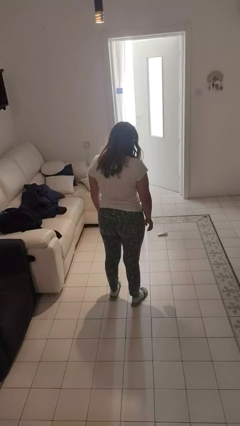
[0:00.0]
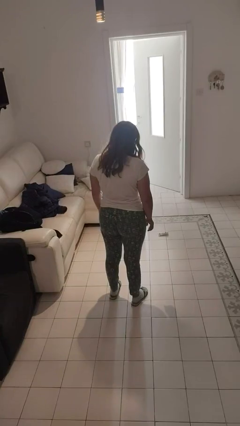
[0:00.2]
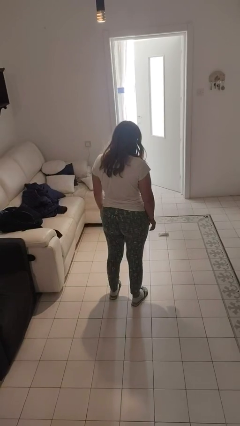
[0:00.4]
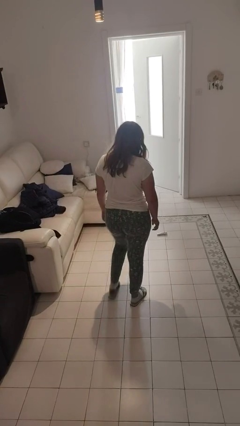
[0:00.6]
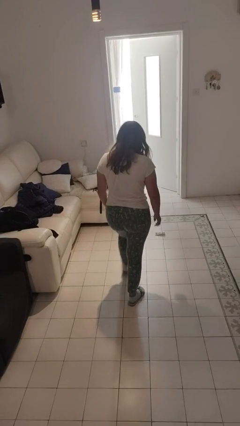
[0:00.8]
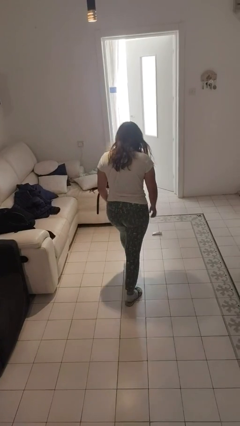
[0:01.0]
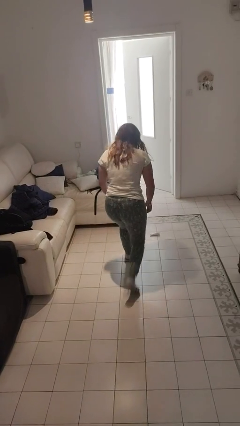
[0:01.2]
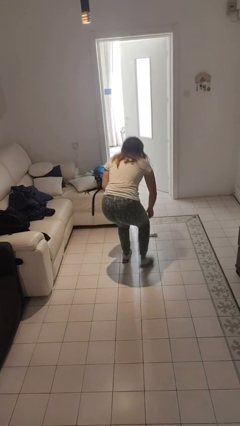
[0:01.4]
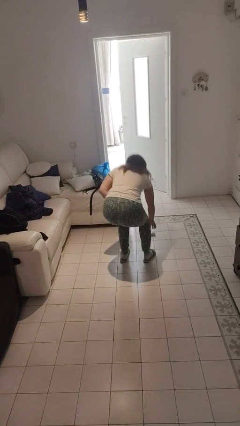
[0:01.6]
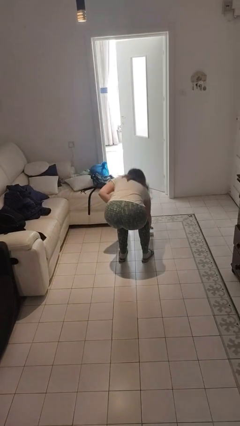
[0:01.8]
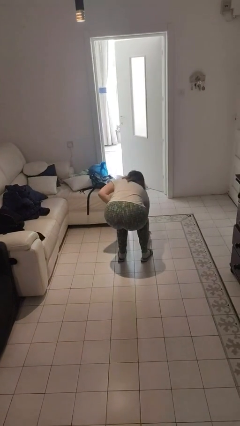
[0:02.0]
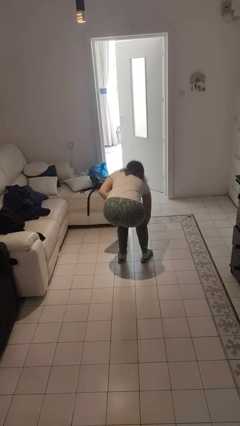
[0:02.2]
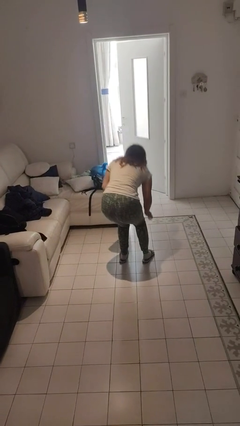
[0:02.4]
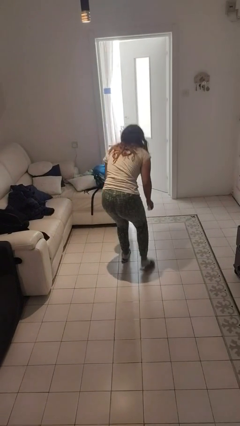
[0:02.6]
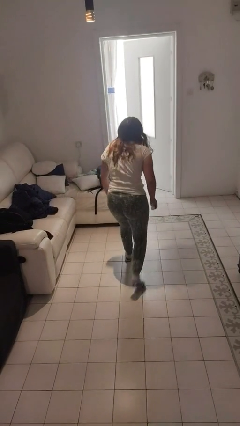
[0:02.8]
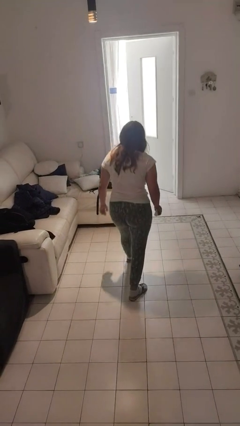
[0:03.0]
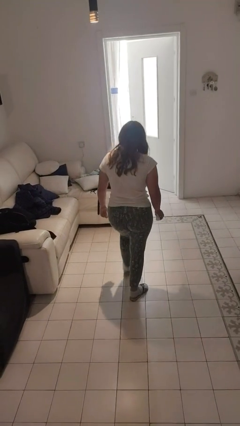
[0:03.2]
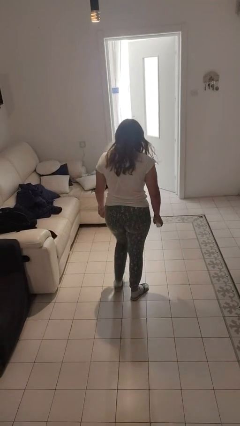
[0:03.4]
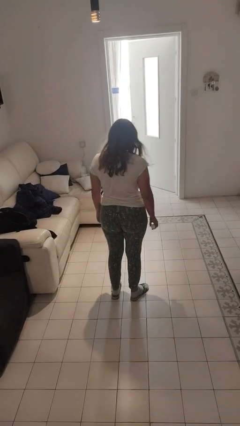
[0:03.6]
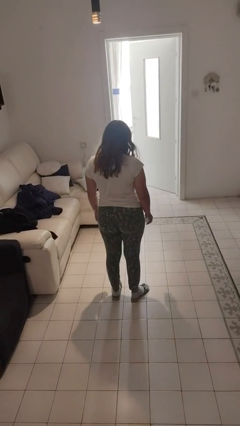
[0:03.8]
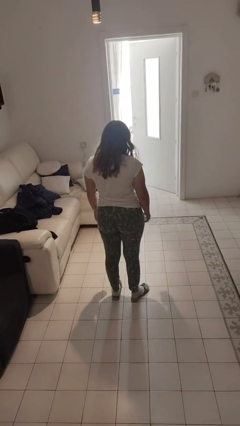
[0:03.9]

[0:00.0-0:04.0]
person picks up object from floor

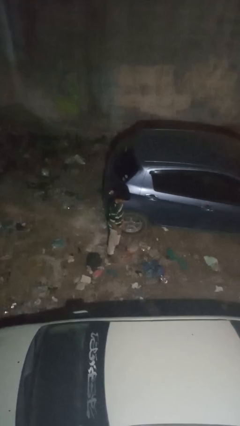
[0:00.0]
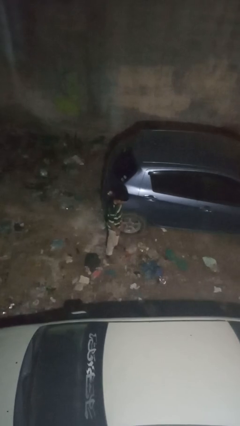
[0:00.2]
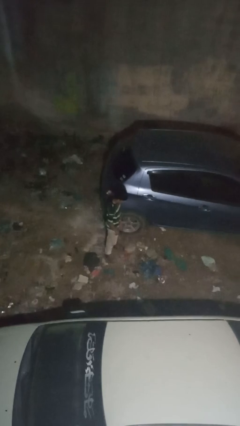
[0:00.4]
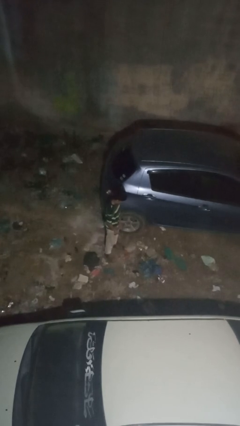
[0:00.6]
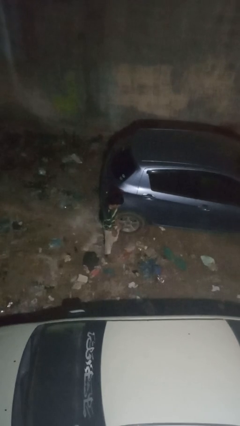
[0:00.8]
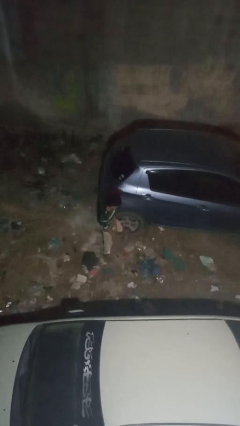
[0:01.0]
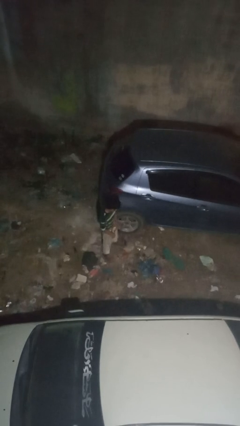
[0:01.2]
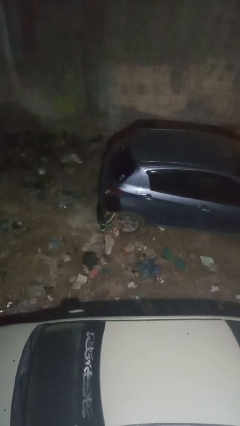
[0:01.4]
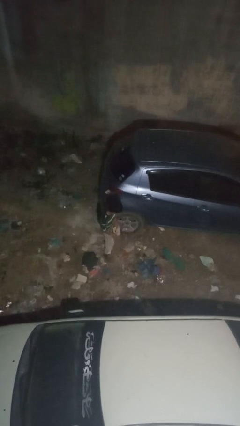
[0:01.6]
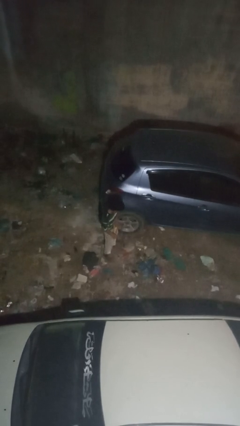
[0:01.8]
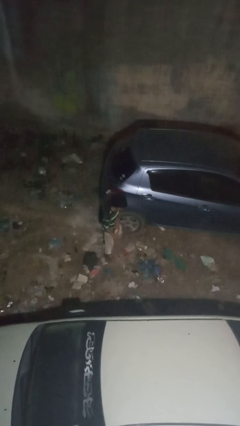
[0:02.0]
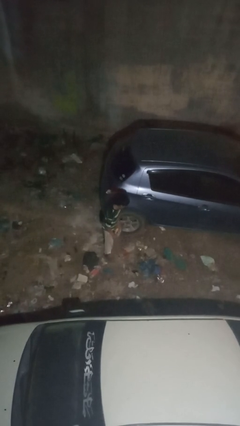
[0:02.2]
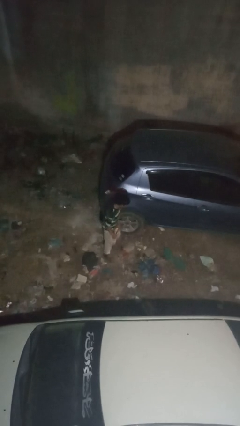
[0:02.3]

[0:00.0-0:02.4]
person kicks car tires

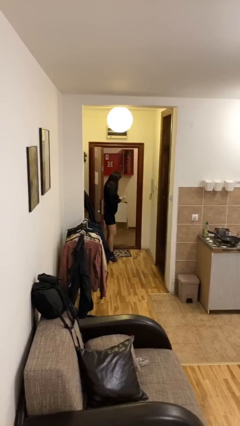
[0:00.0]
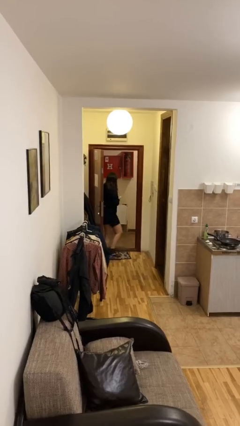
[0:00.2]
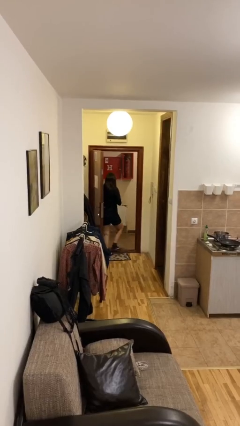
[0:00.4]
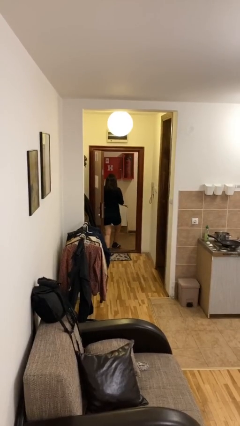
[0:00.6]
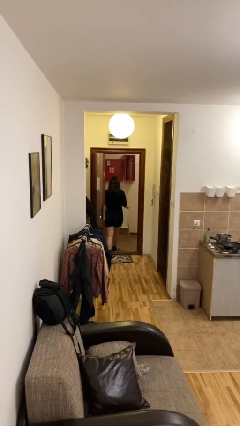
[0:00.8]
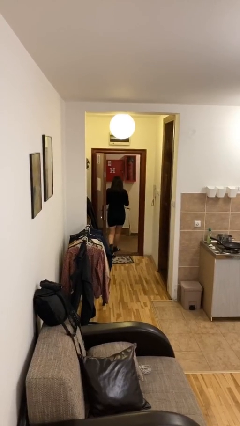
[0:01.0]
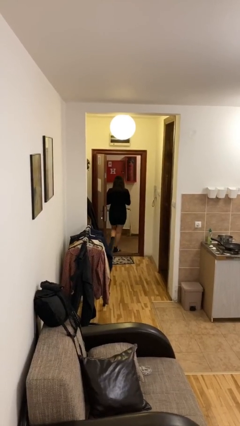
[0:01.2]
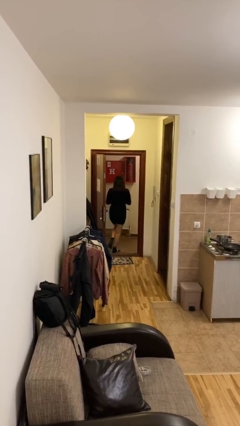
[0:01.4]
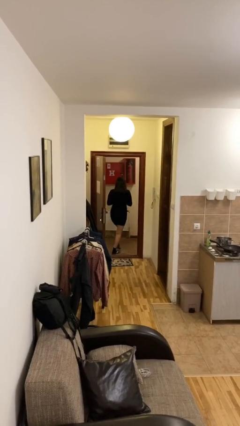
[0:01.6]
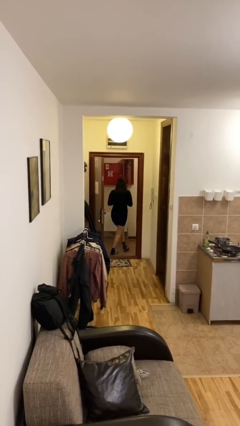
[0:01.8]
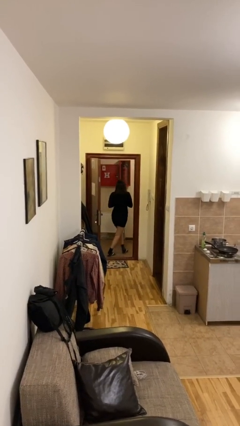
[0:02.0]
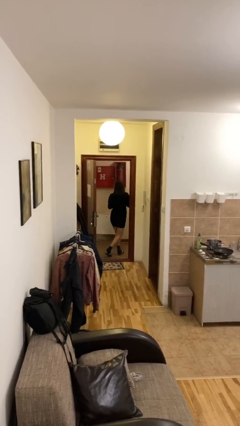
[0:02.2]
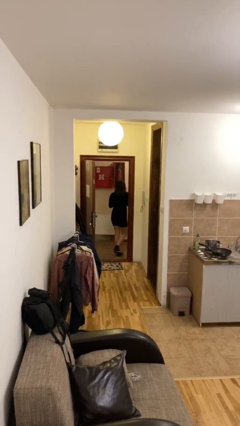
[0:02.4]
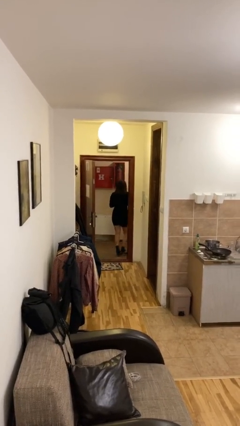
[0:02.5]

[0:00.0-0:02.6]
person exits scene through structure

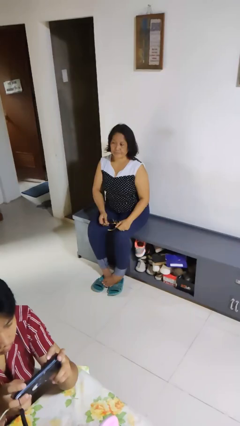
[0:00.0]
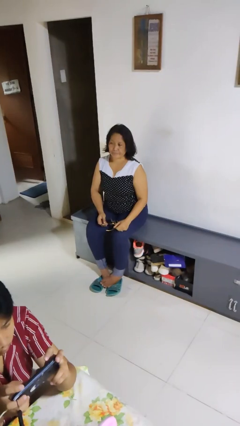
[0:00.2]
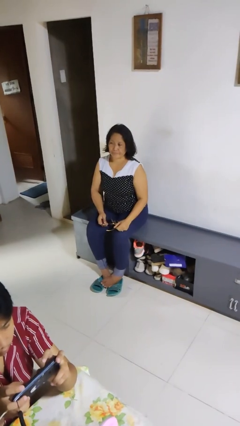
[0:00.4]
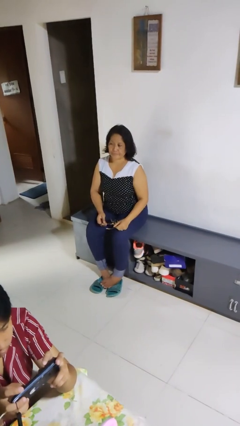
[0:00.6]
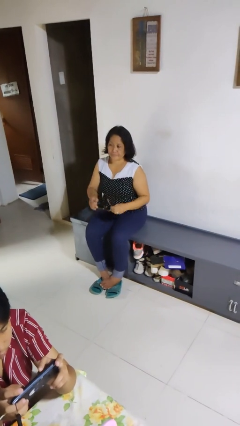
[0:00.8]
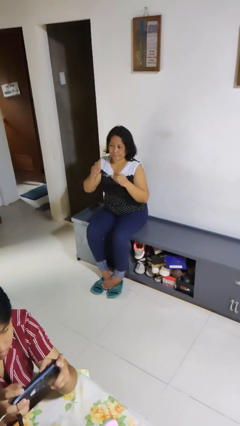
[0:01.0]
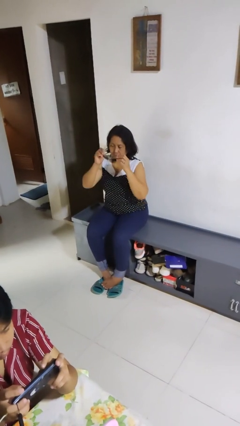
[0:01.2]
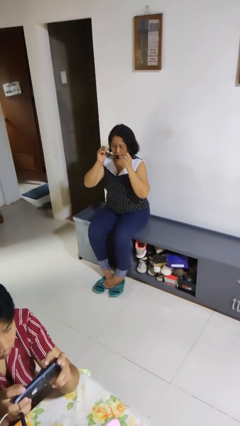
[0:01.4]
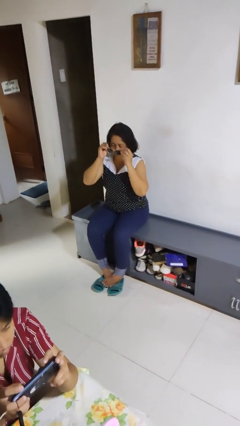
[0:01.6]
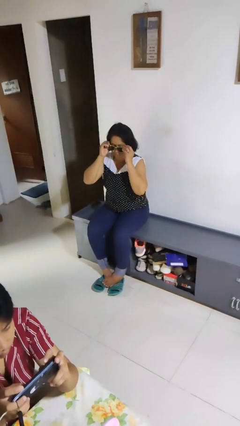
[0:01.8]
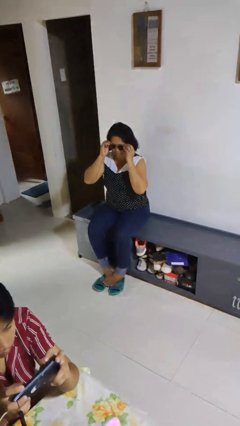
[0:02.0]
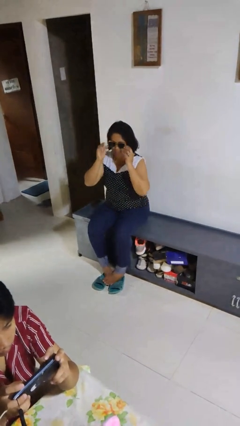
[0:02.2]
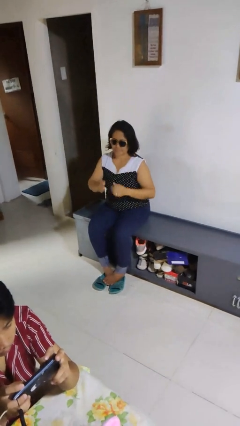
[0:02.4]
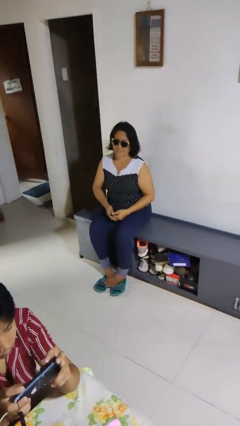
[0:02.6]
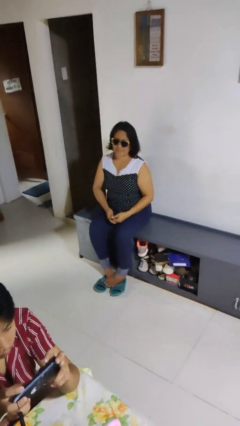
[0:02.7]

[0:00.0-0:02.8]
person puts on sunglasses

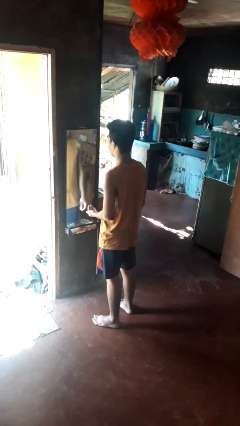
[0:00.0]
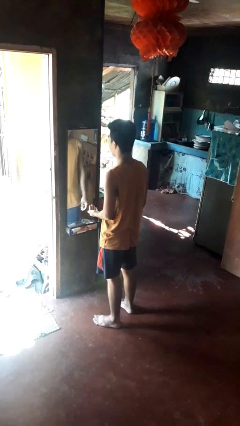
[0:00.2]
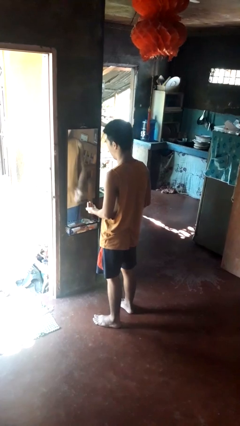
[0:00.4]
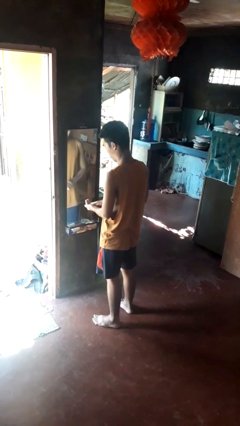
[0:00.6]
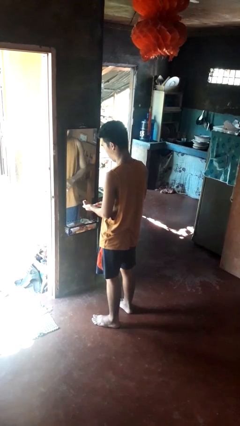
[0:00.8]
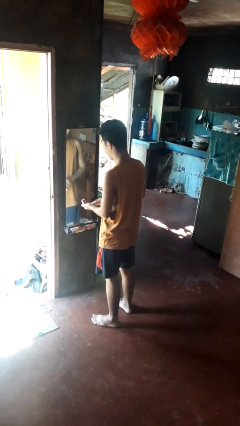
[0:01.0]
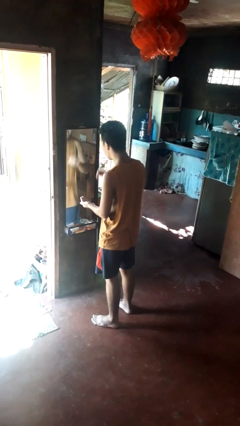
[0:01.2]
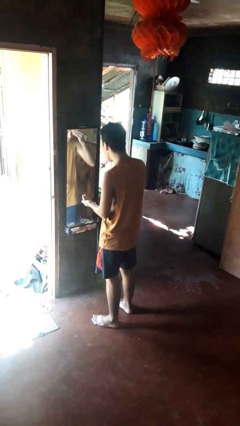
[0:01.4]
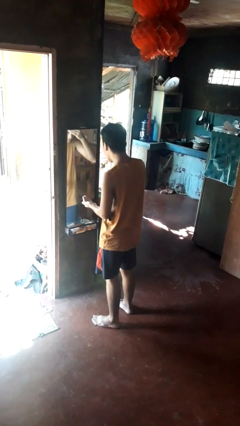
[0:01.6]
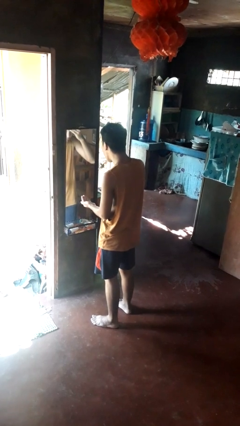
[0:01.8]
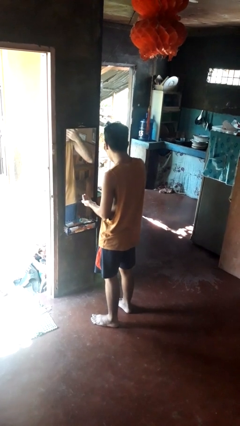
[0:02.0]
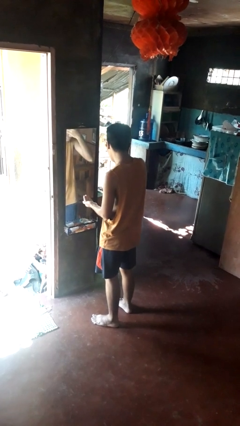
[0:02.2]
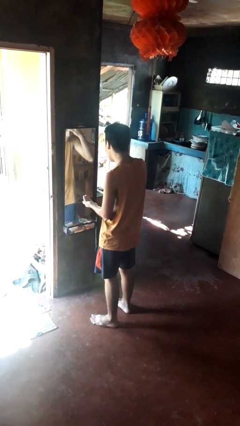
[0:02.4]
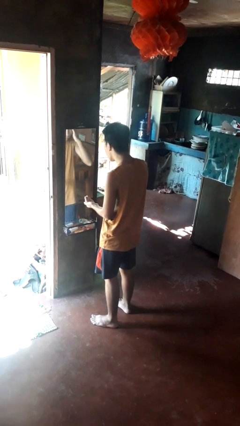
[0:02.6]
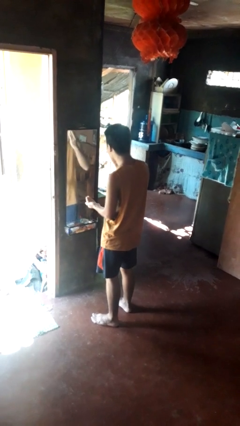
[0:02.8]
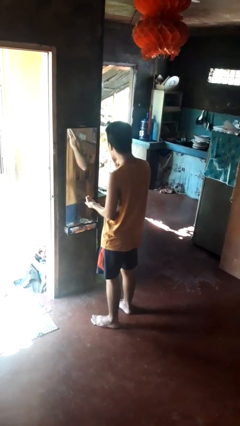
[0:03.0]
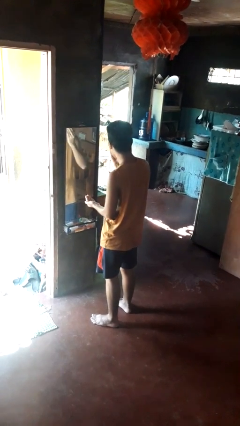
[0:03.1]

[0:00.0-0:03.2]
person applies foundation makeup

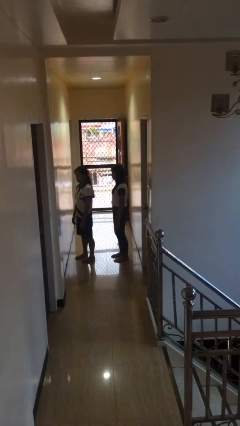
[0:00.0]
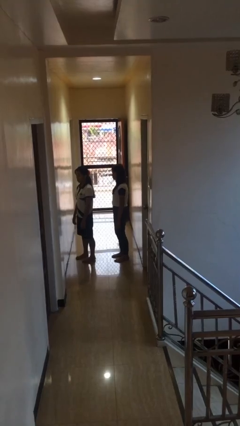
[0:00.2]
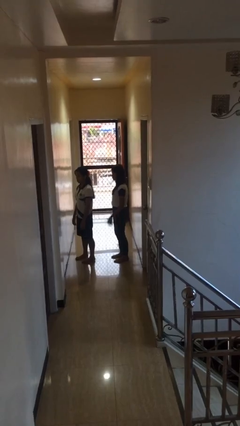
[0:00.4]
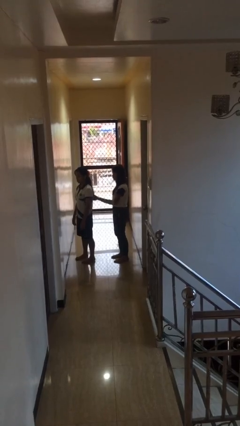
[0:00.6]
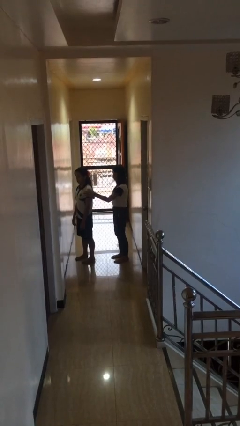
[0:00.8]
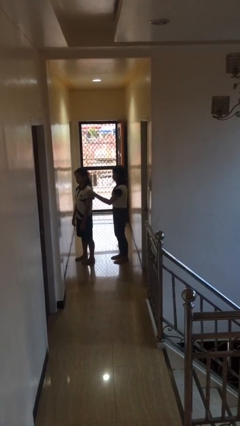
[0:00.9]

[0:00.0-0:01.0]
person grabs person by shoulder

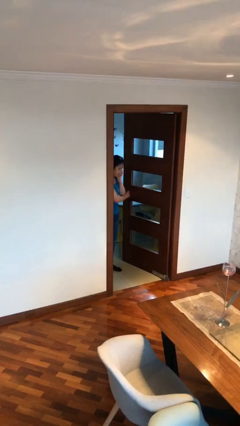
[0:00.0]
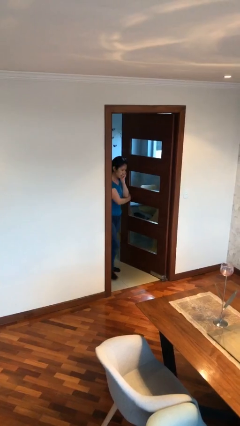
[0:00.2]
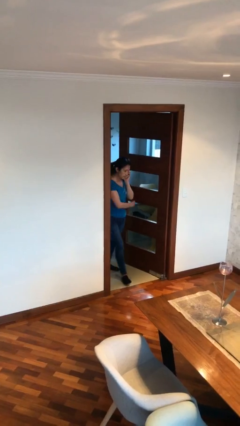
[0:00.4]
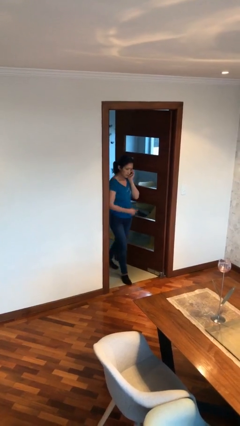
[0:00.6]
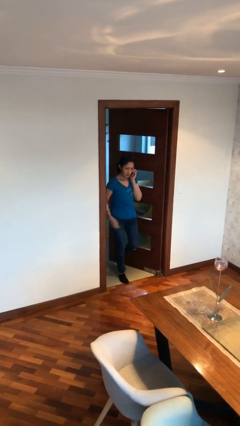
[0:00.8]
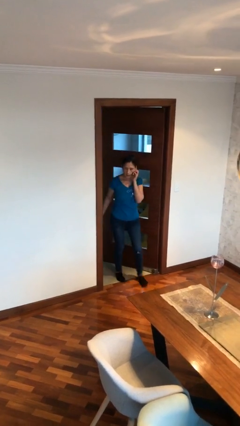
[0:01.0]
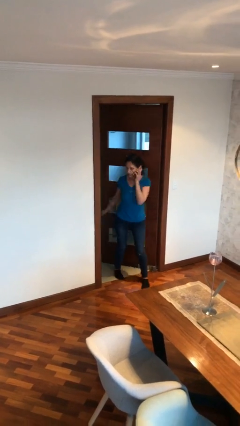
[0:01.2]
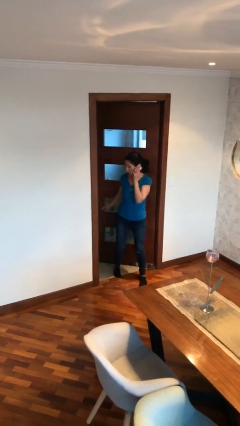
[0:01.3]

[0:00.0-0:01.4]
person enters scene through structure
